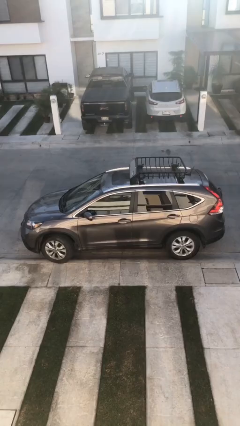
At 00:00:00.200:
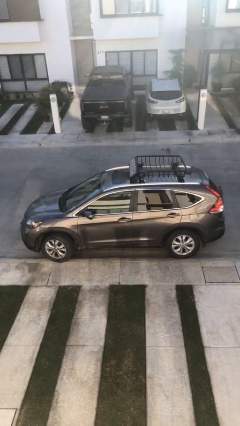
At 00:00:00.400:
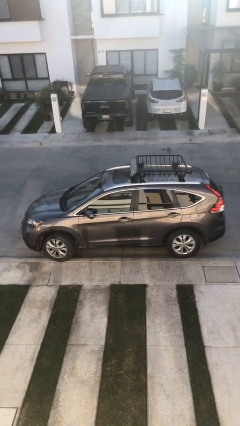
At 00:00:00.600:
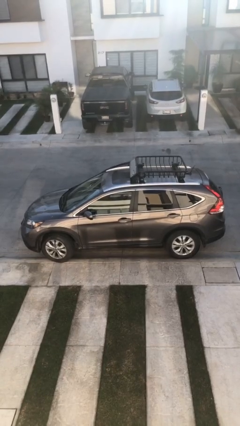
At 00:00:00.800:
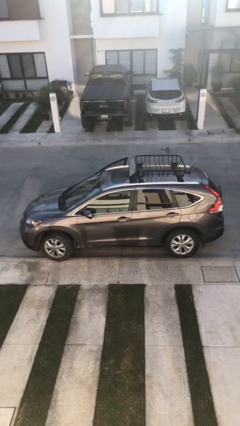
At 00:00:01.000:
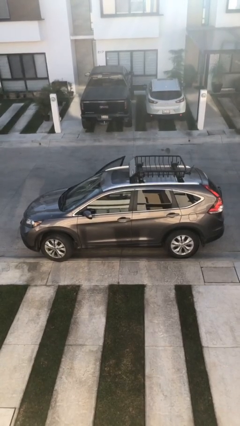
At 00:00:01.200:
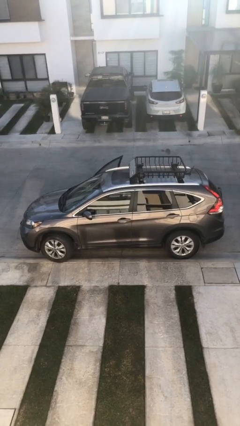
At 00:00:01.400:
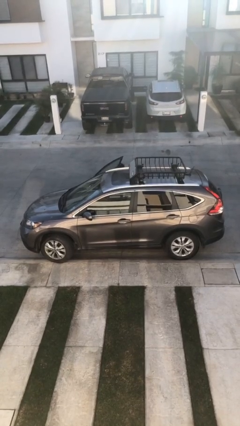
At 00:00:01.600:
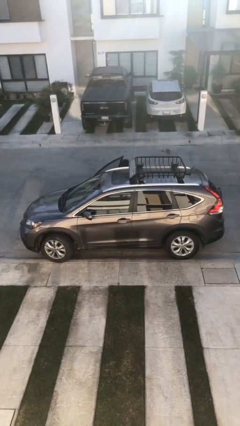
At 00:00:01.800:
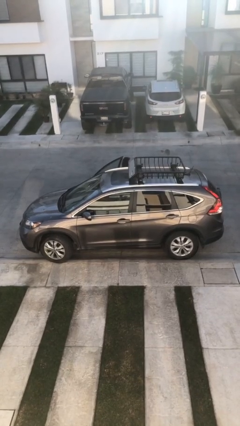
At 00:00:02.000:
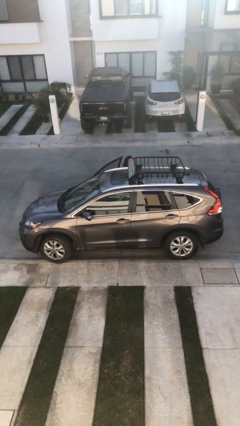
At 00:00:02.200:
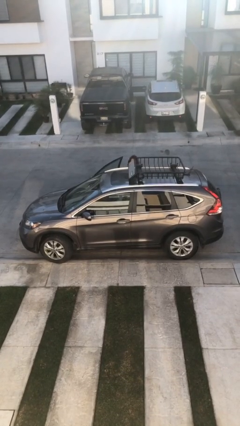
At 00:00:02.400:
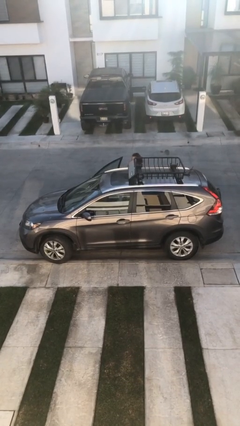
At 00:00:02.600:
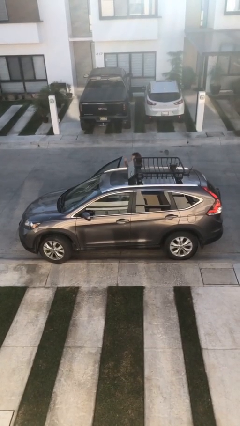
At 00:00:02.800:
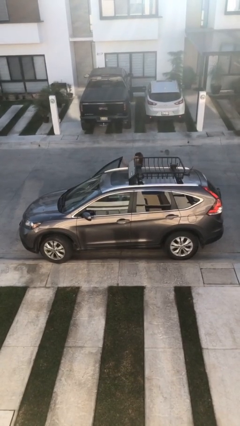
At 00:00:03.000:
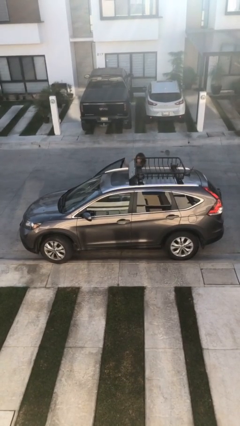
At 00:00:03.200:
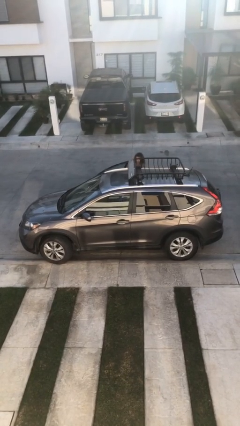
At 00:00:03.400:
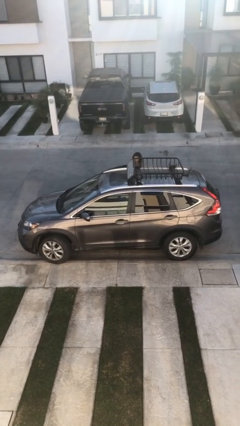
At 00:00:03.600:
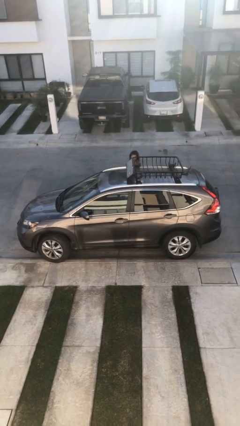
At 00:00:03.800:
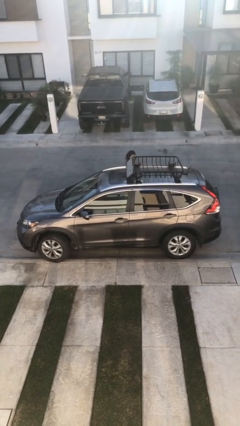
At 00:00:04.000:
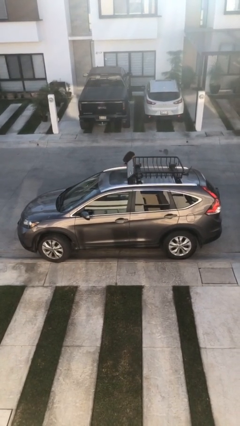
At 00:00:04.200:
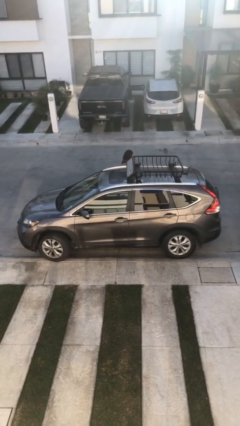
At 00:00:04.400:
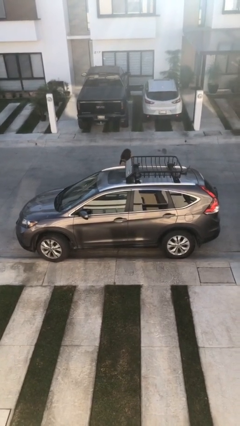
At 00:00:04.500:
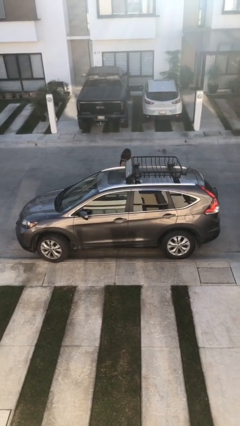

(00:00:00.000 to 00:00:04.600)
car drops off person

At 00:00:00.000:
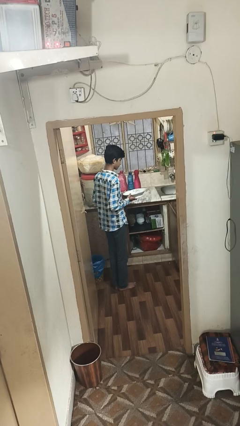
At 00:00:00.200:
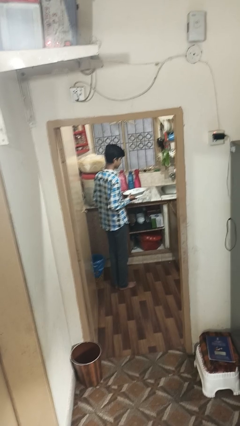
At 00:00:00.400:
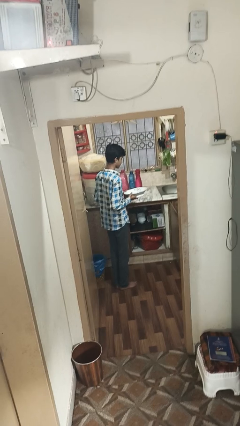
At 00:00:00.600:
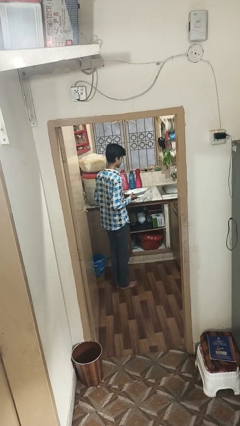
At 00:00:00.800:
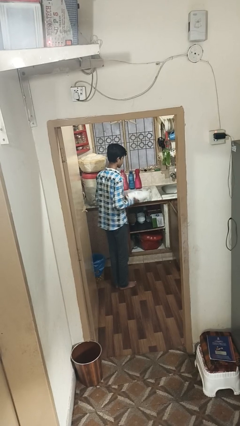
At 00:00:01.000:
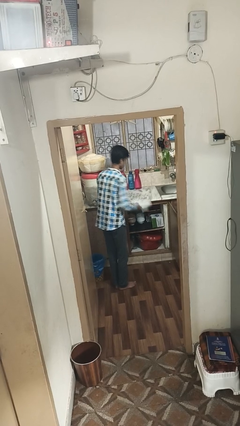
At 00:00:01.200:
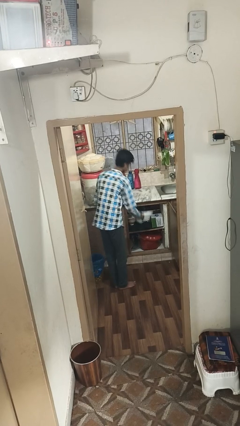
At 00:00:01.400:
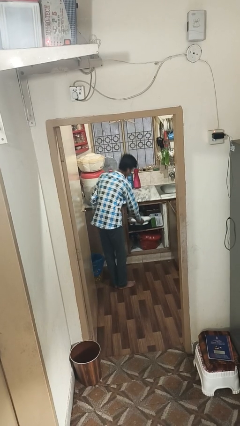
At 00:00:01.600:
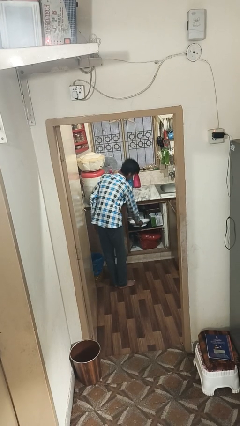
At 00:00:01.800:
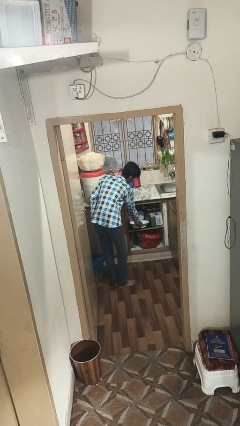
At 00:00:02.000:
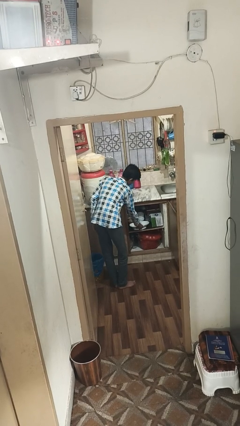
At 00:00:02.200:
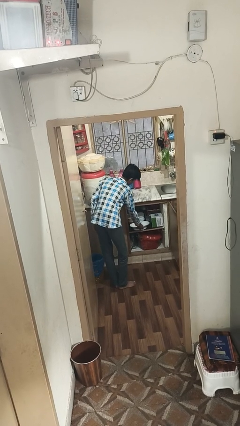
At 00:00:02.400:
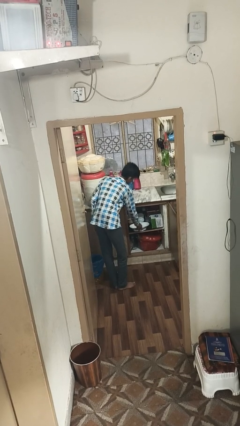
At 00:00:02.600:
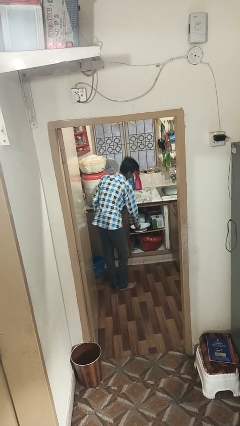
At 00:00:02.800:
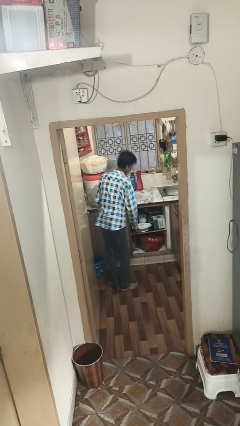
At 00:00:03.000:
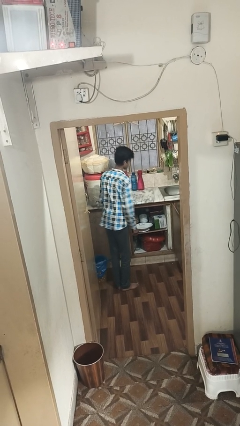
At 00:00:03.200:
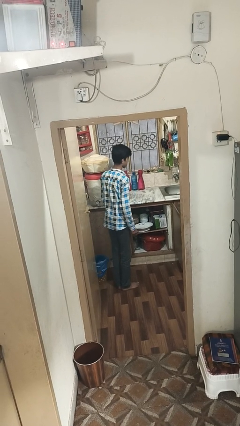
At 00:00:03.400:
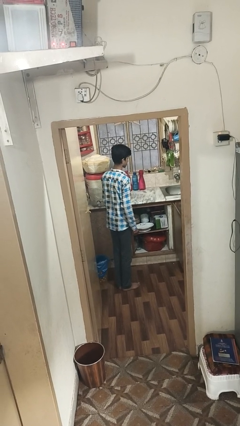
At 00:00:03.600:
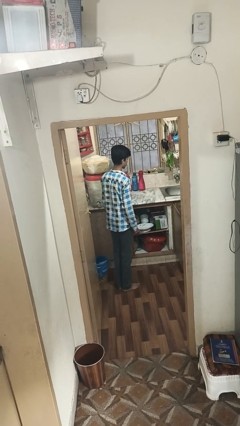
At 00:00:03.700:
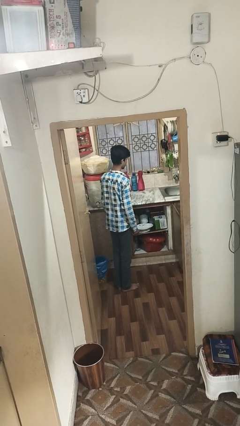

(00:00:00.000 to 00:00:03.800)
person puts down object into cabinet

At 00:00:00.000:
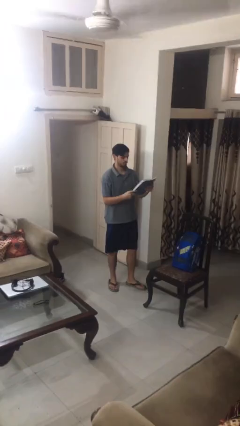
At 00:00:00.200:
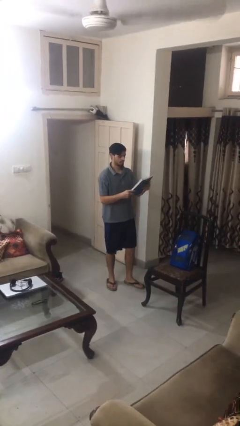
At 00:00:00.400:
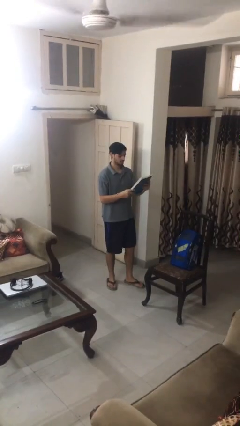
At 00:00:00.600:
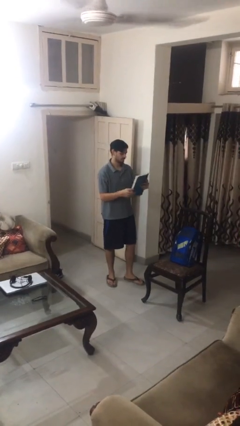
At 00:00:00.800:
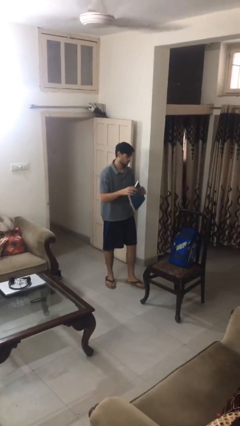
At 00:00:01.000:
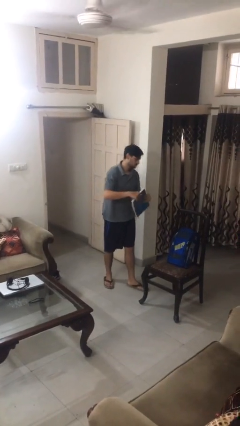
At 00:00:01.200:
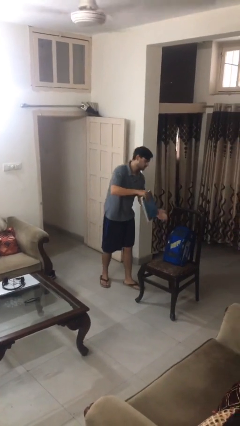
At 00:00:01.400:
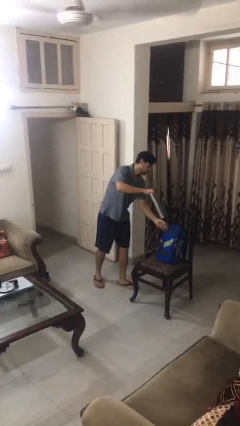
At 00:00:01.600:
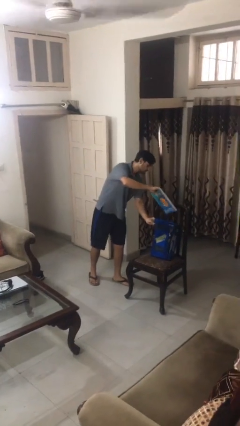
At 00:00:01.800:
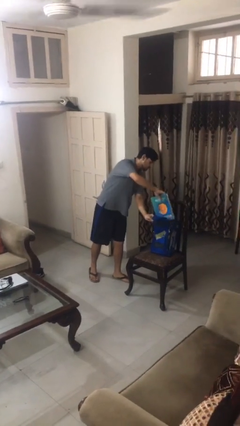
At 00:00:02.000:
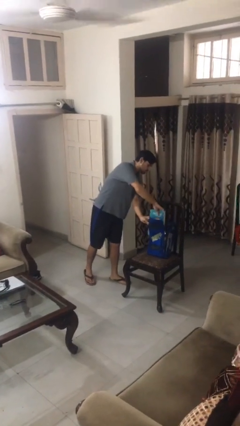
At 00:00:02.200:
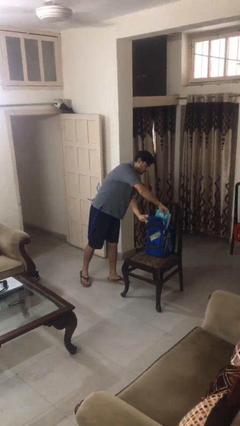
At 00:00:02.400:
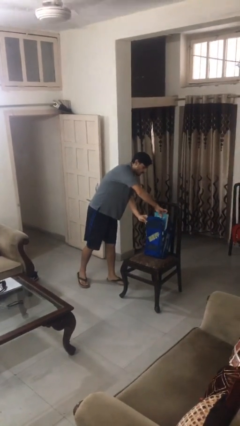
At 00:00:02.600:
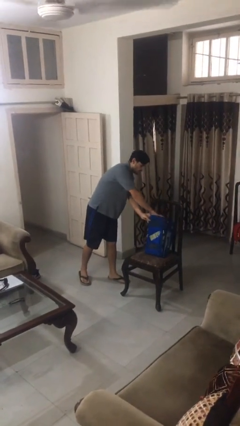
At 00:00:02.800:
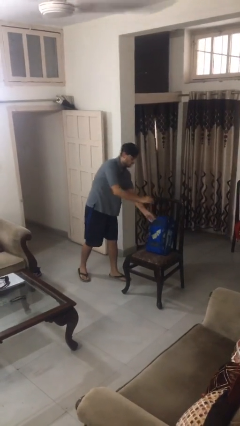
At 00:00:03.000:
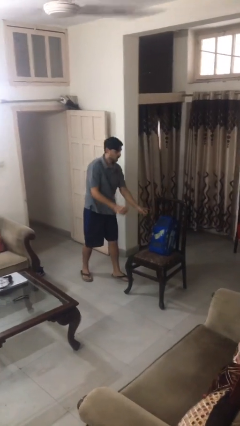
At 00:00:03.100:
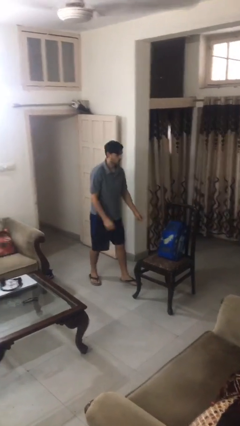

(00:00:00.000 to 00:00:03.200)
person puts object into backpack

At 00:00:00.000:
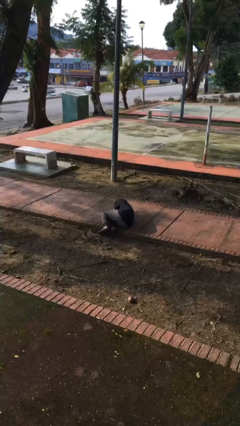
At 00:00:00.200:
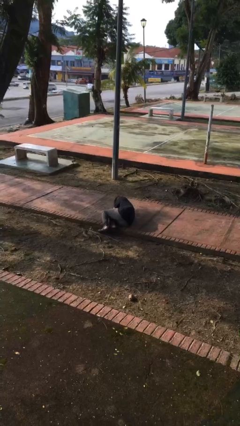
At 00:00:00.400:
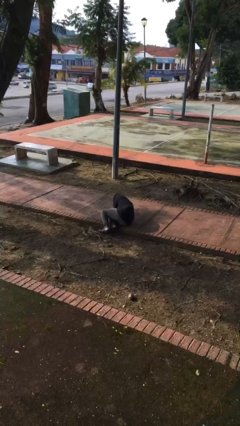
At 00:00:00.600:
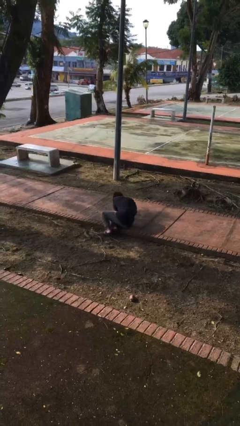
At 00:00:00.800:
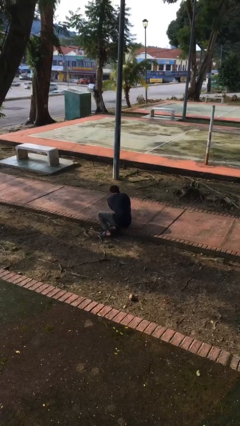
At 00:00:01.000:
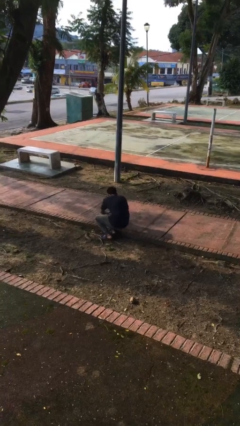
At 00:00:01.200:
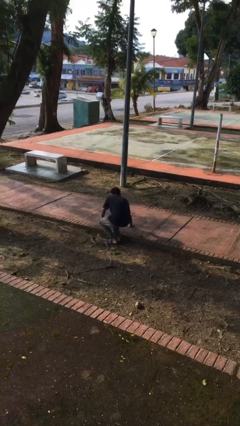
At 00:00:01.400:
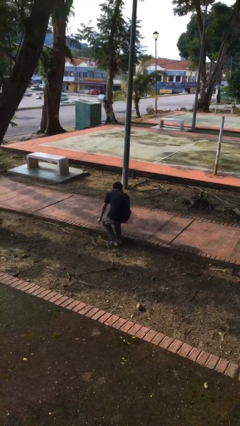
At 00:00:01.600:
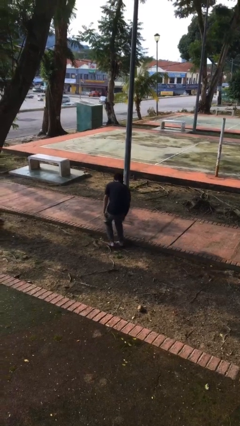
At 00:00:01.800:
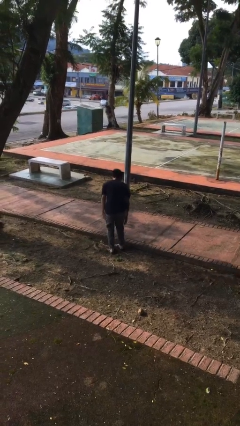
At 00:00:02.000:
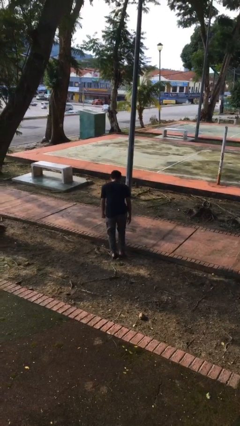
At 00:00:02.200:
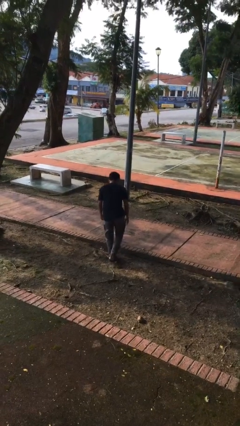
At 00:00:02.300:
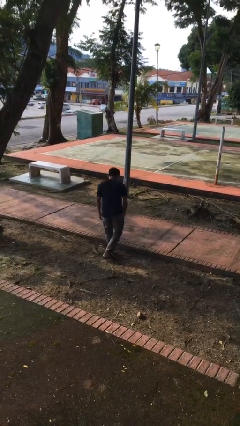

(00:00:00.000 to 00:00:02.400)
person stands up from floor

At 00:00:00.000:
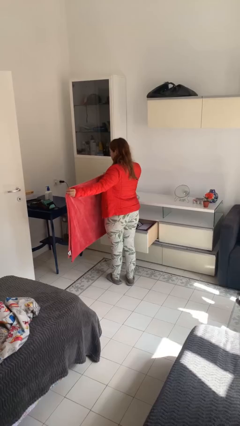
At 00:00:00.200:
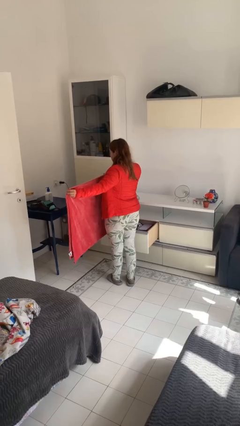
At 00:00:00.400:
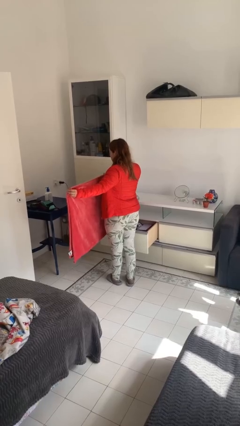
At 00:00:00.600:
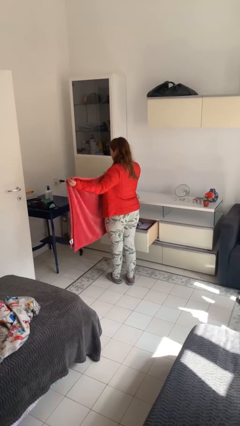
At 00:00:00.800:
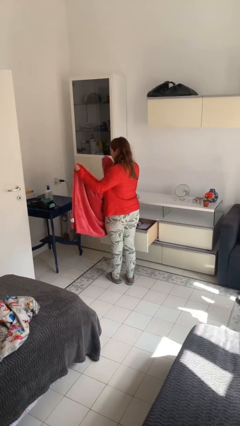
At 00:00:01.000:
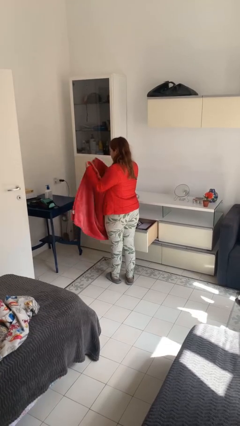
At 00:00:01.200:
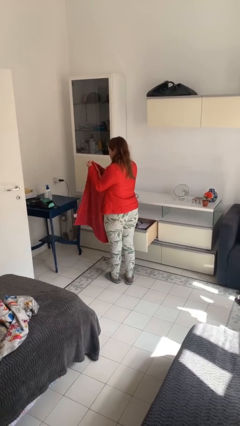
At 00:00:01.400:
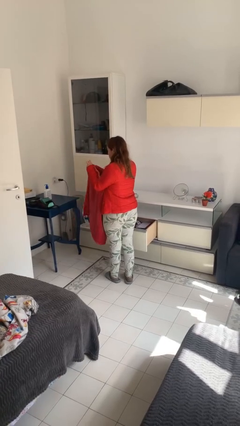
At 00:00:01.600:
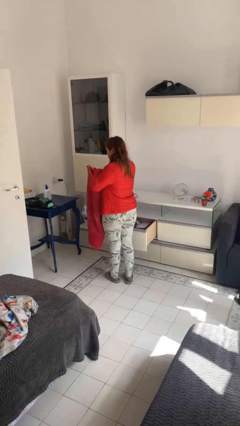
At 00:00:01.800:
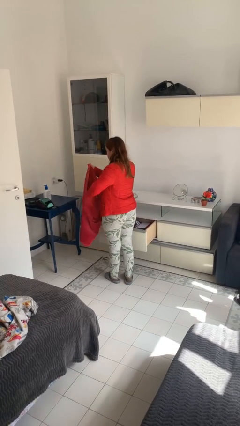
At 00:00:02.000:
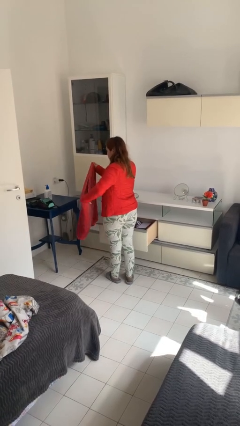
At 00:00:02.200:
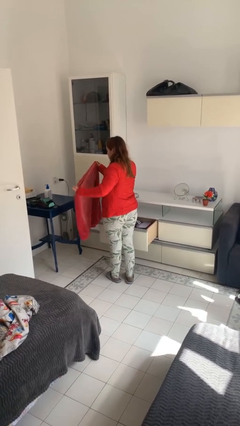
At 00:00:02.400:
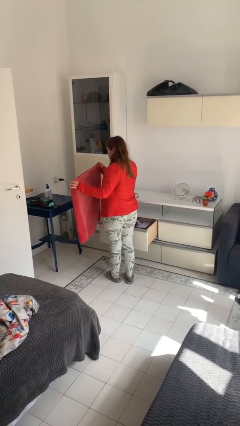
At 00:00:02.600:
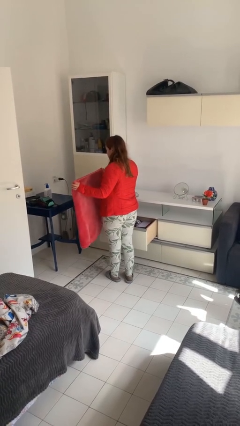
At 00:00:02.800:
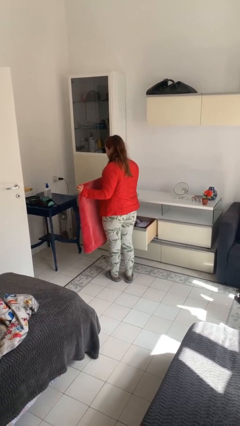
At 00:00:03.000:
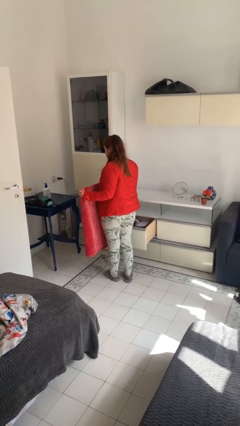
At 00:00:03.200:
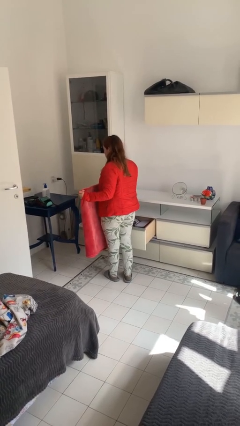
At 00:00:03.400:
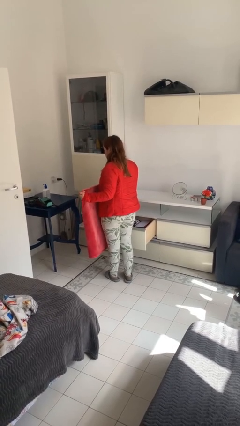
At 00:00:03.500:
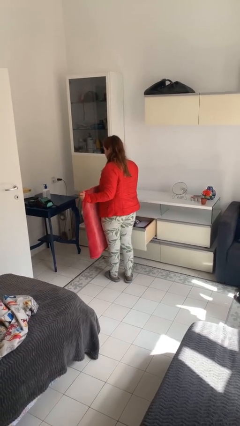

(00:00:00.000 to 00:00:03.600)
person unfolds blanket
